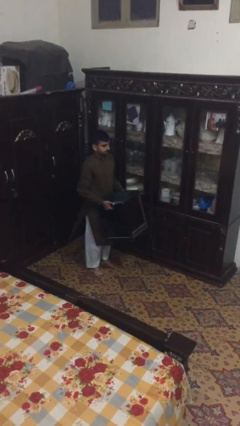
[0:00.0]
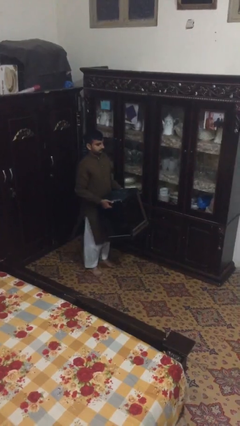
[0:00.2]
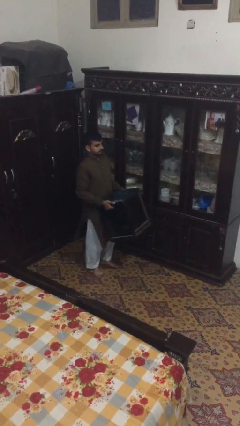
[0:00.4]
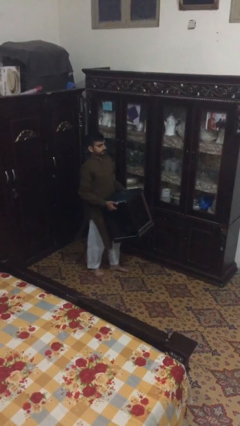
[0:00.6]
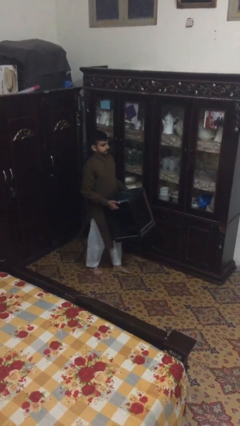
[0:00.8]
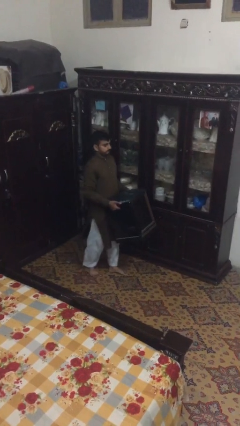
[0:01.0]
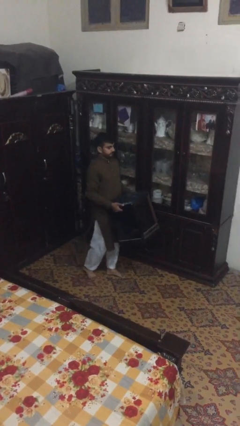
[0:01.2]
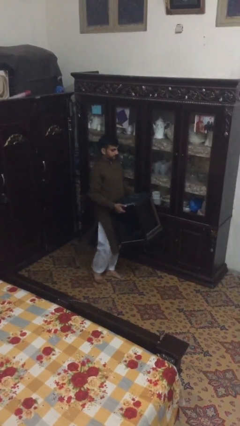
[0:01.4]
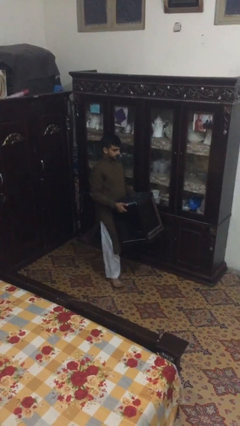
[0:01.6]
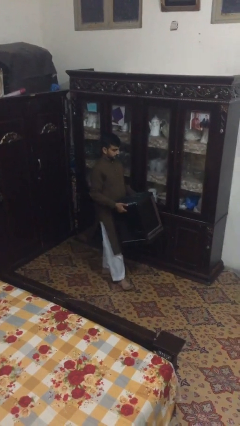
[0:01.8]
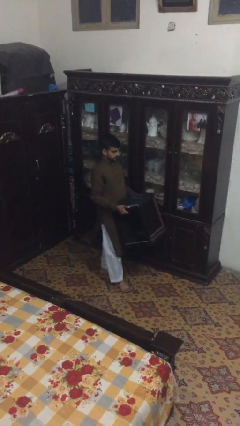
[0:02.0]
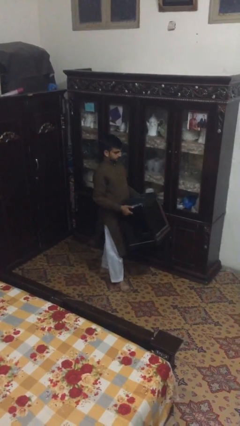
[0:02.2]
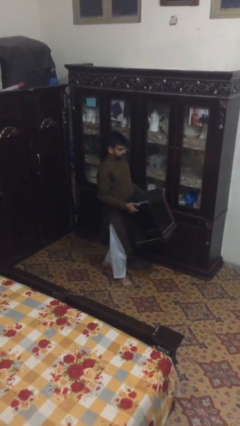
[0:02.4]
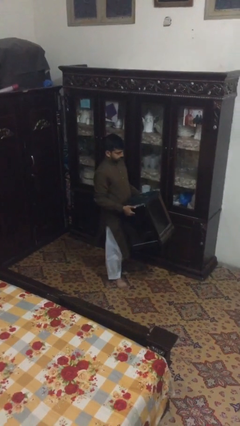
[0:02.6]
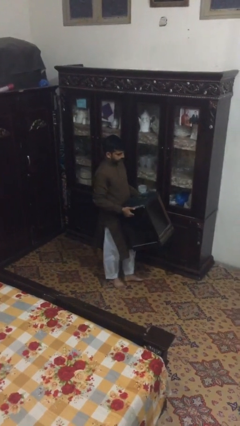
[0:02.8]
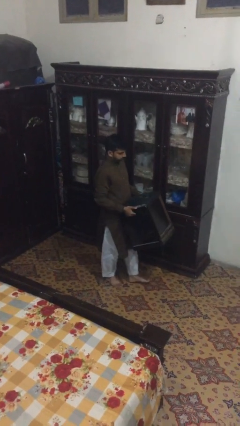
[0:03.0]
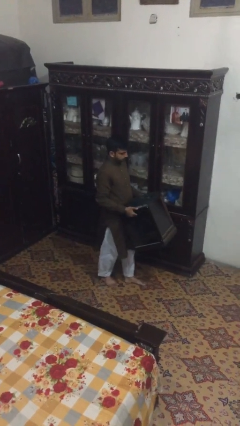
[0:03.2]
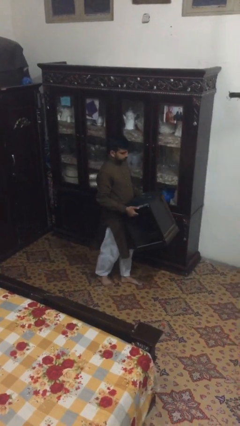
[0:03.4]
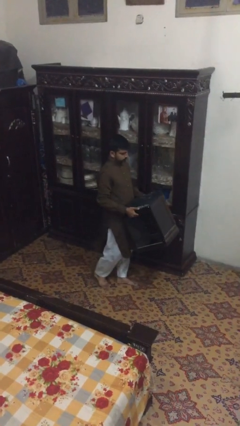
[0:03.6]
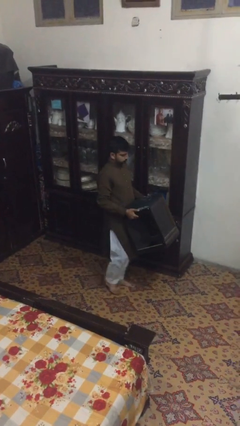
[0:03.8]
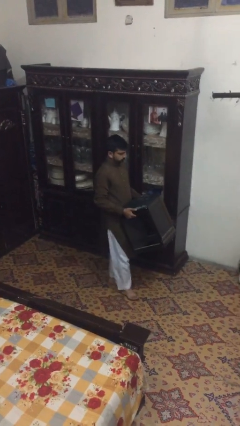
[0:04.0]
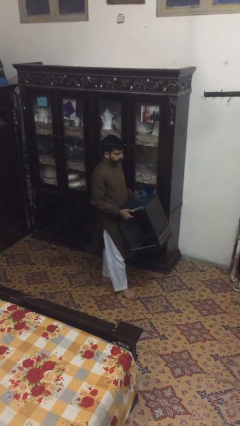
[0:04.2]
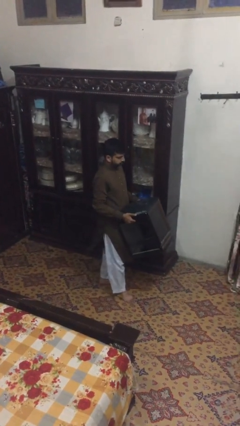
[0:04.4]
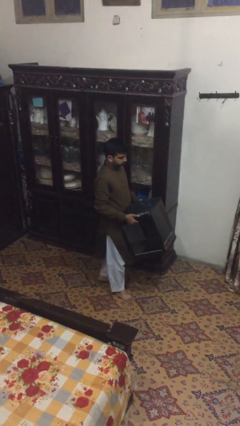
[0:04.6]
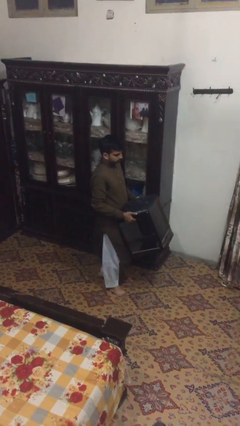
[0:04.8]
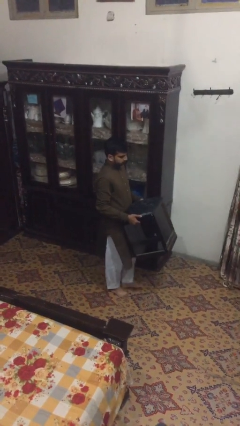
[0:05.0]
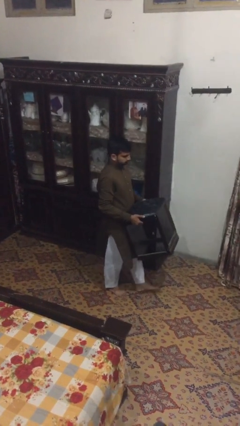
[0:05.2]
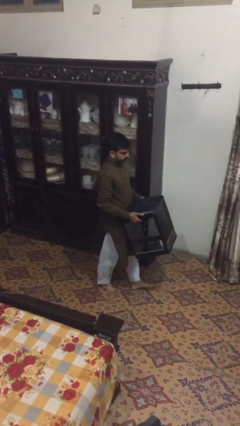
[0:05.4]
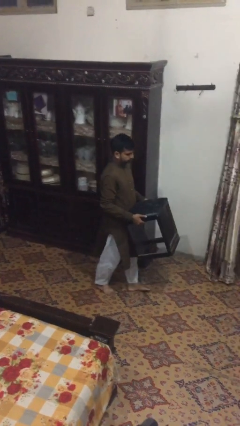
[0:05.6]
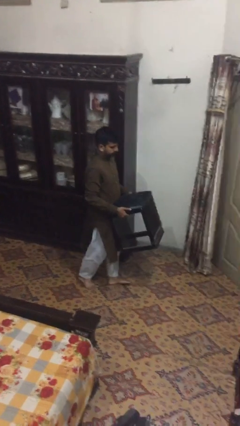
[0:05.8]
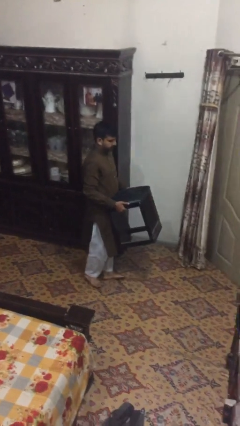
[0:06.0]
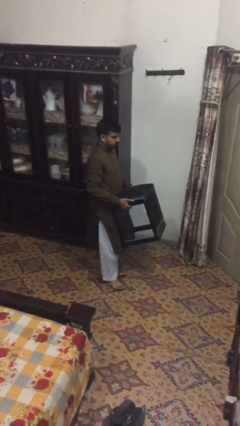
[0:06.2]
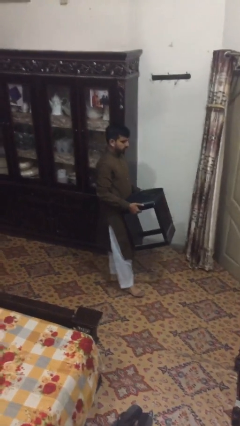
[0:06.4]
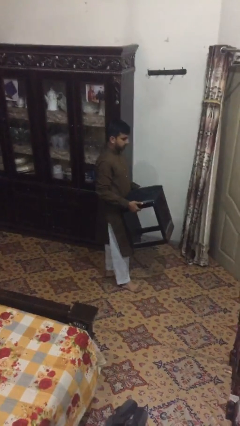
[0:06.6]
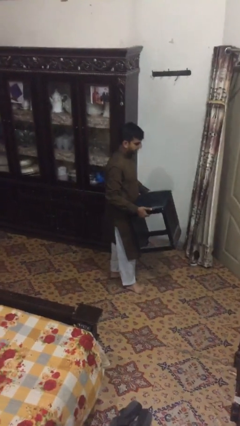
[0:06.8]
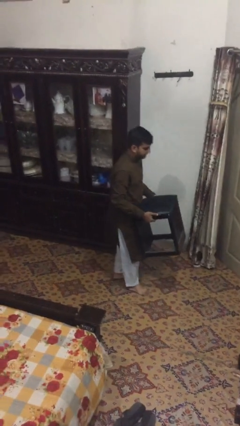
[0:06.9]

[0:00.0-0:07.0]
person carries heavy object

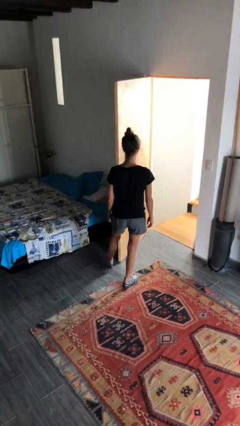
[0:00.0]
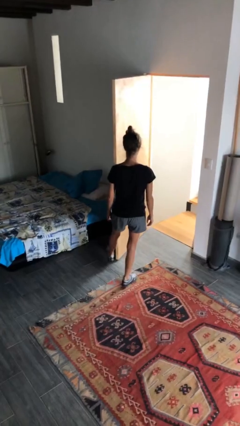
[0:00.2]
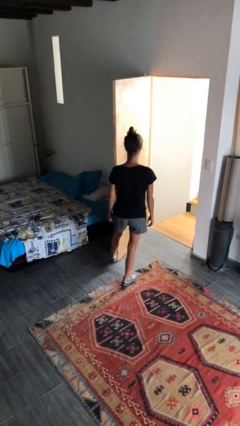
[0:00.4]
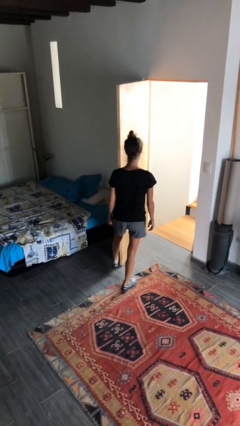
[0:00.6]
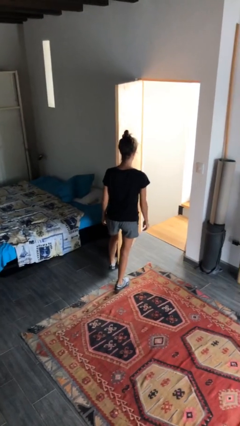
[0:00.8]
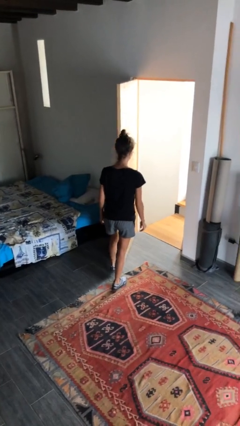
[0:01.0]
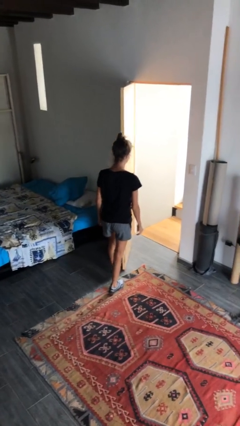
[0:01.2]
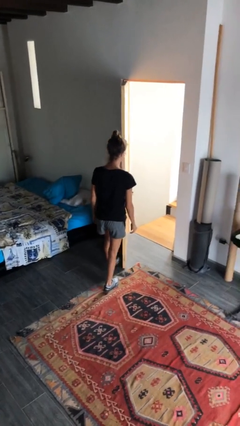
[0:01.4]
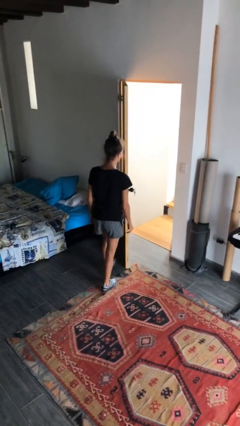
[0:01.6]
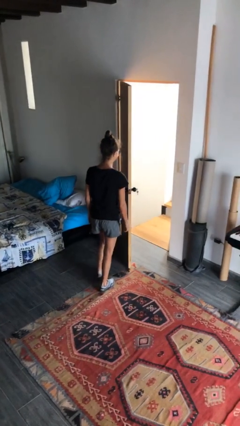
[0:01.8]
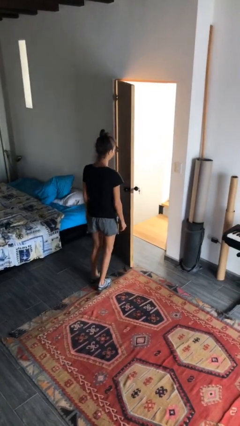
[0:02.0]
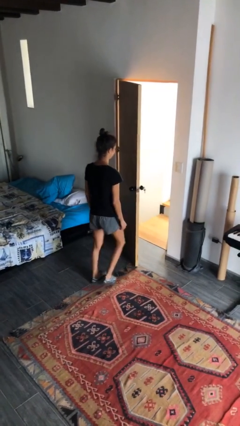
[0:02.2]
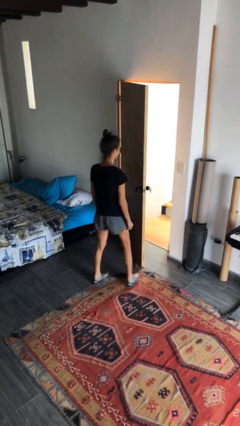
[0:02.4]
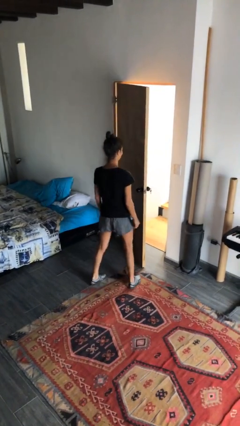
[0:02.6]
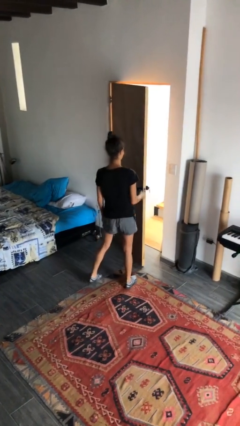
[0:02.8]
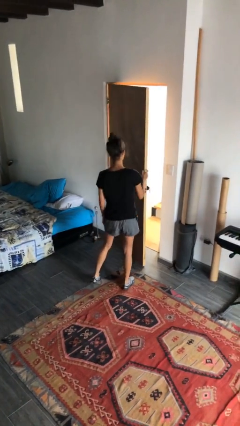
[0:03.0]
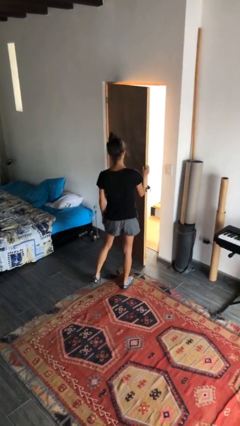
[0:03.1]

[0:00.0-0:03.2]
person closes door with foot

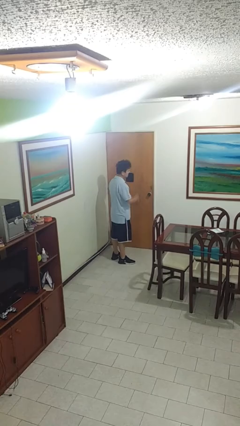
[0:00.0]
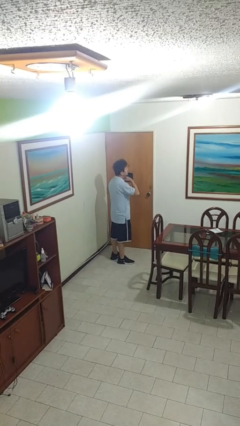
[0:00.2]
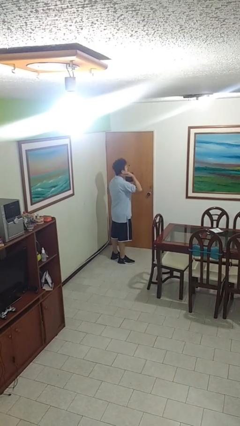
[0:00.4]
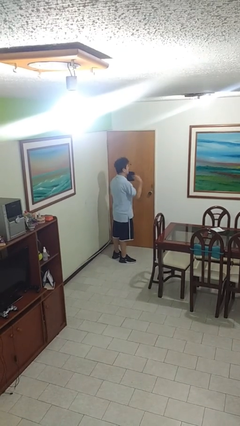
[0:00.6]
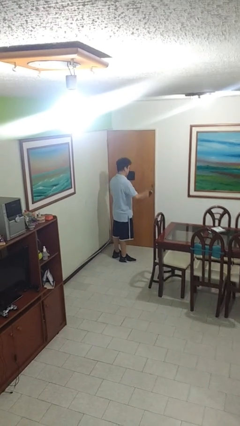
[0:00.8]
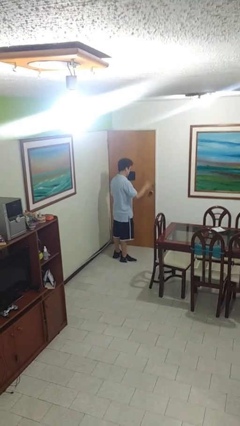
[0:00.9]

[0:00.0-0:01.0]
person gestures cut

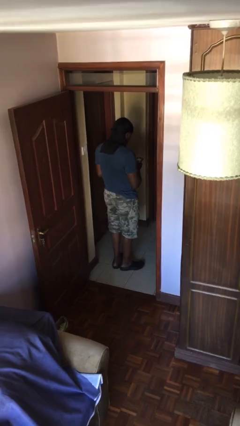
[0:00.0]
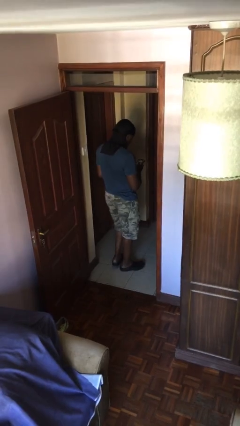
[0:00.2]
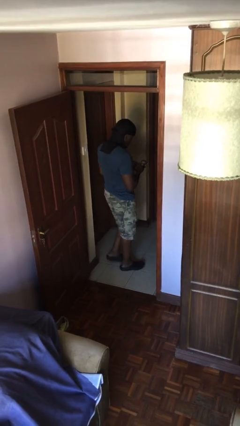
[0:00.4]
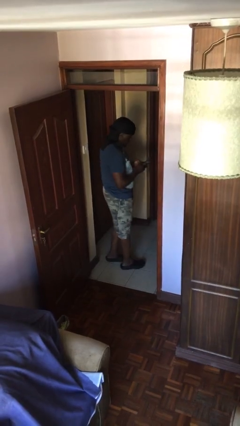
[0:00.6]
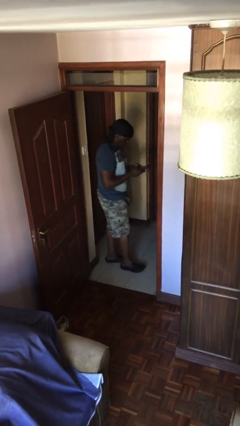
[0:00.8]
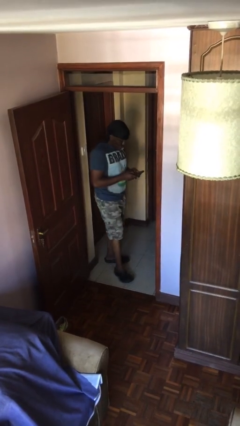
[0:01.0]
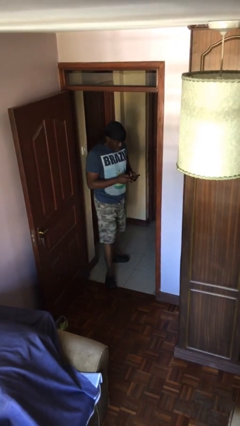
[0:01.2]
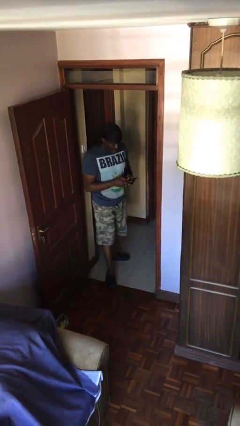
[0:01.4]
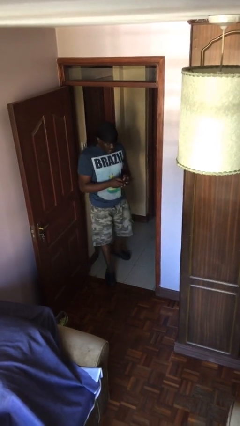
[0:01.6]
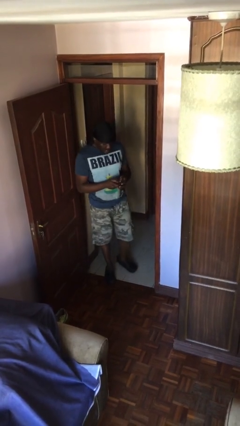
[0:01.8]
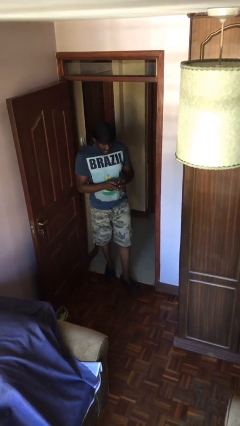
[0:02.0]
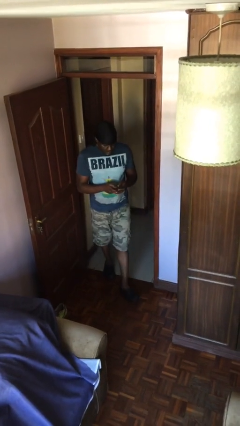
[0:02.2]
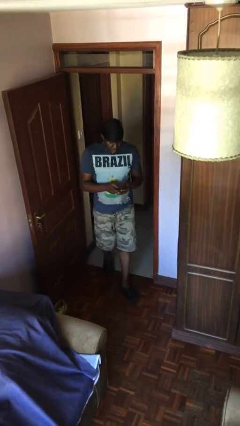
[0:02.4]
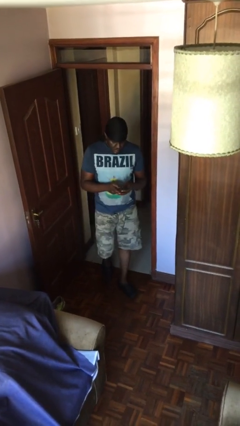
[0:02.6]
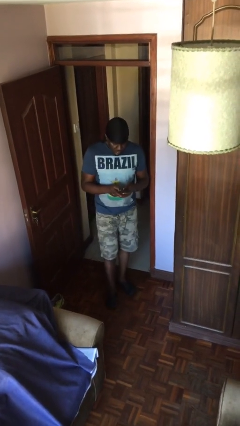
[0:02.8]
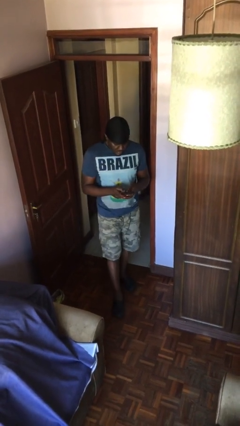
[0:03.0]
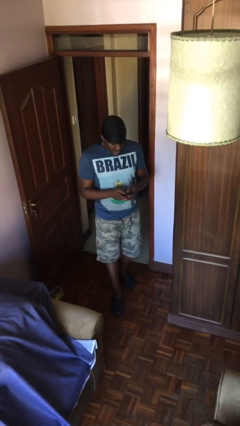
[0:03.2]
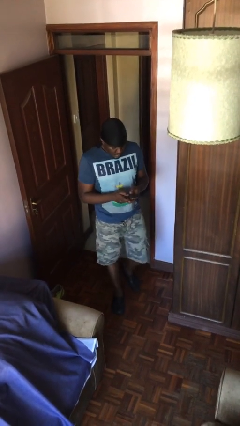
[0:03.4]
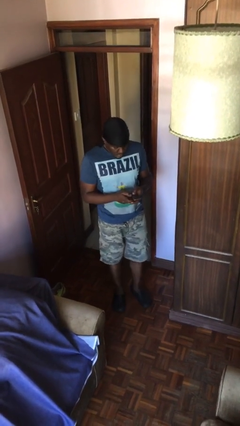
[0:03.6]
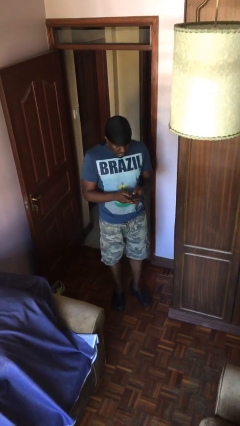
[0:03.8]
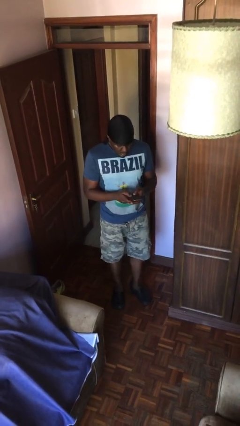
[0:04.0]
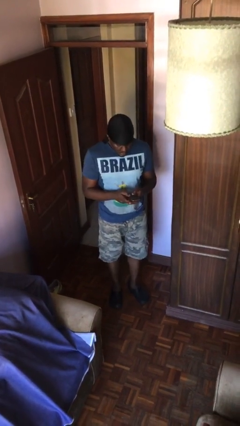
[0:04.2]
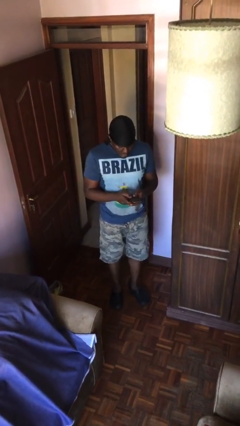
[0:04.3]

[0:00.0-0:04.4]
person enters scene through structure

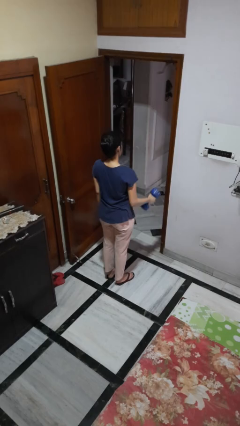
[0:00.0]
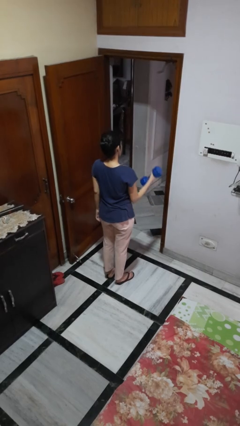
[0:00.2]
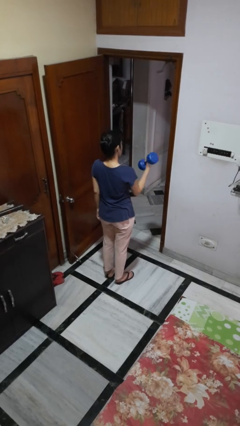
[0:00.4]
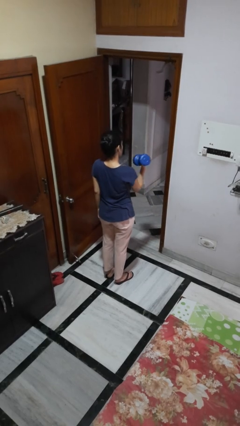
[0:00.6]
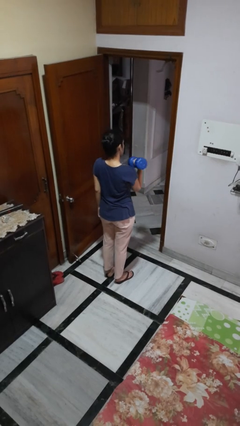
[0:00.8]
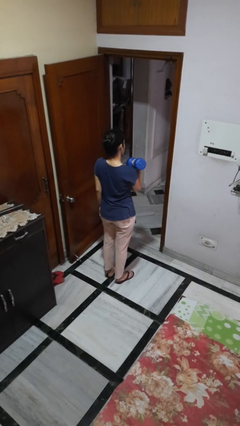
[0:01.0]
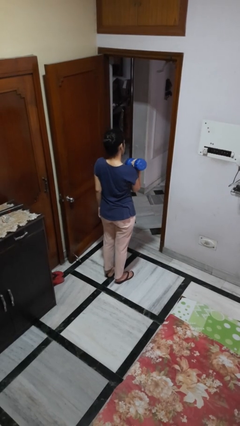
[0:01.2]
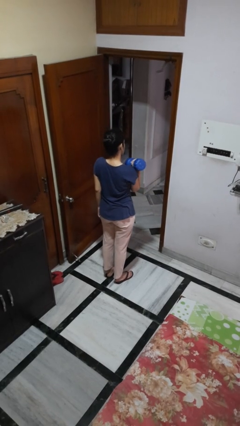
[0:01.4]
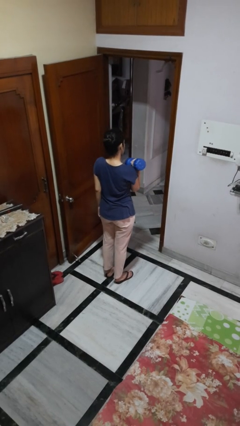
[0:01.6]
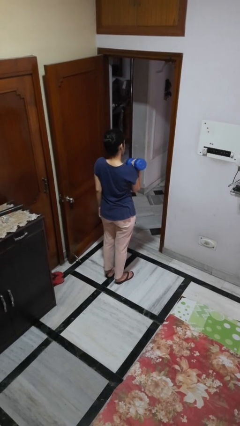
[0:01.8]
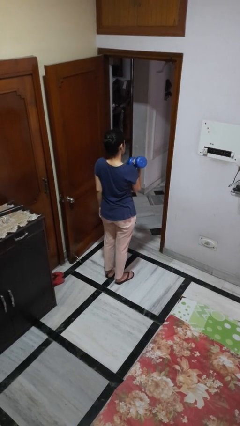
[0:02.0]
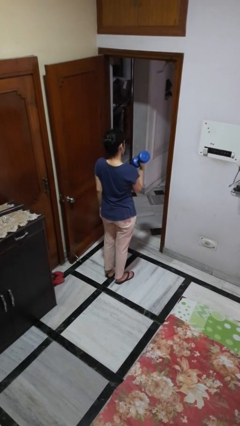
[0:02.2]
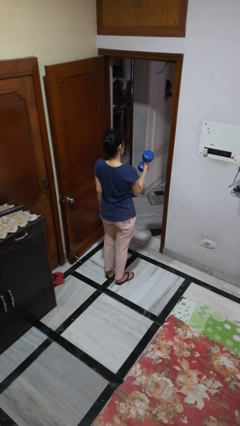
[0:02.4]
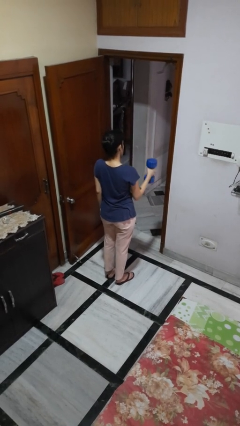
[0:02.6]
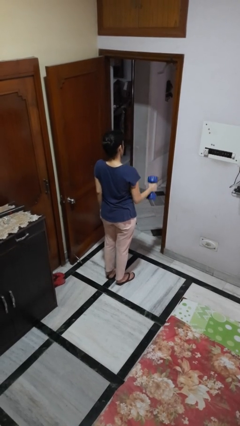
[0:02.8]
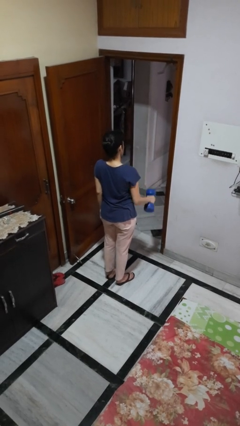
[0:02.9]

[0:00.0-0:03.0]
person lifts dumbbells
